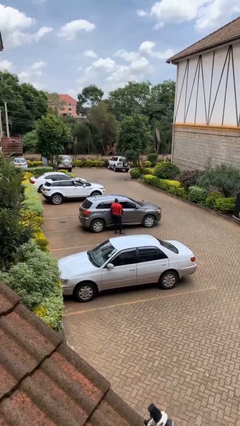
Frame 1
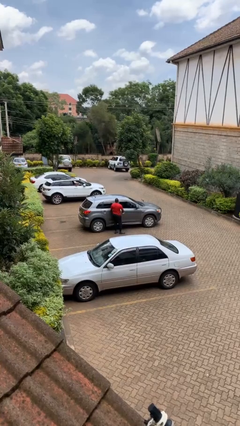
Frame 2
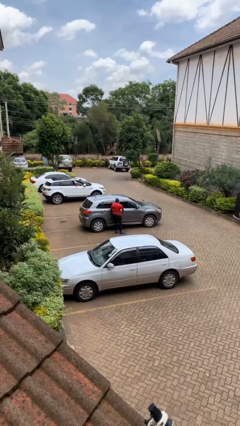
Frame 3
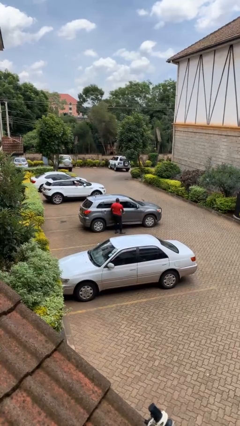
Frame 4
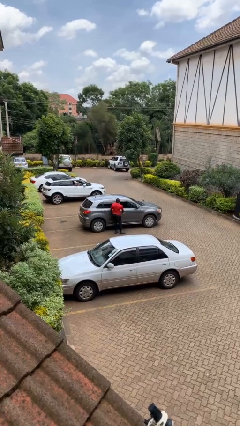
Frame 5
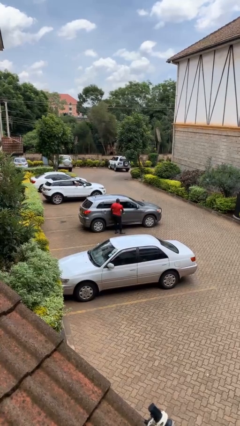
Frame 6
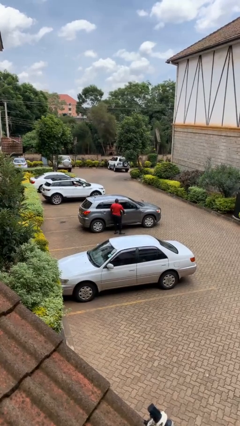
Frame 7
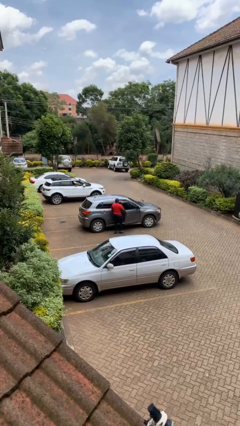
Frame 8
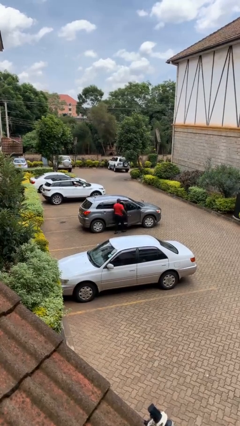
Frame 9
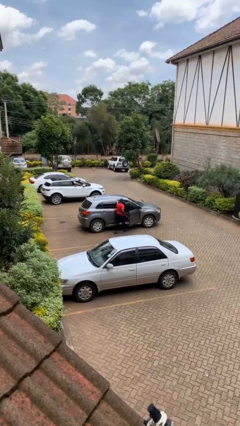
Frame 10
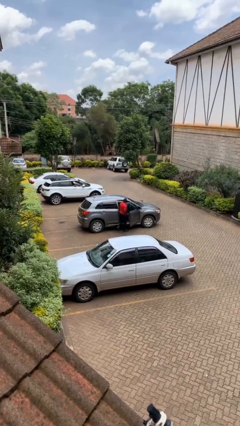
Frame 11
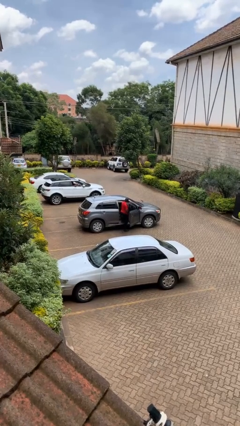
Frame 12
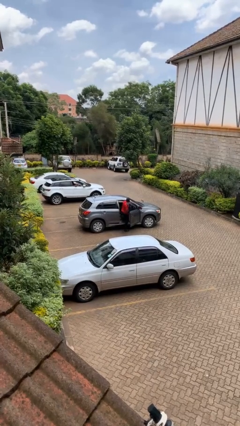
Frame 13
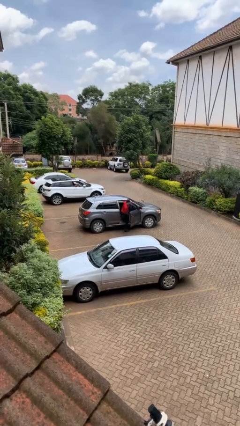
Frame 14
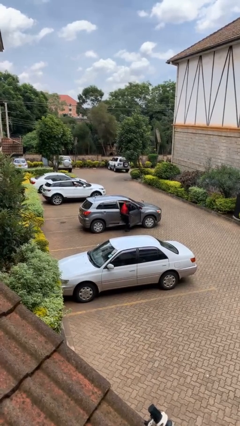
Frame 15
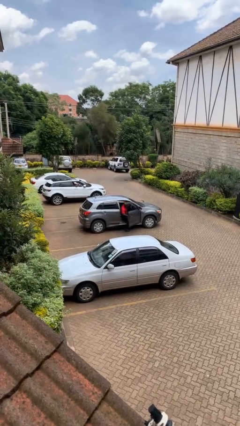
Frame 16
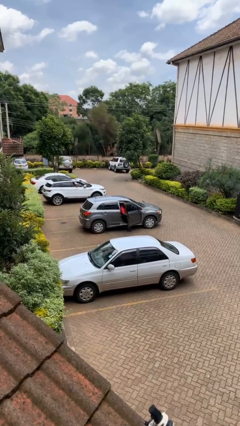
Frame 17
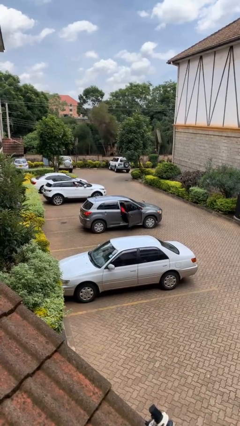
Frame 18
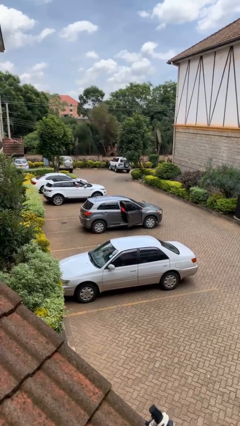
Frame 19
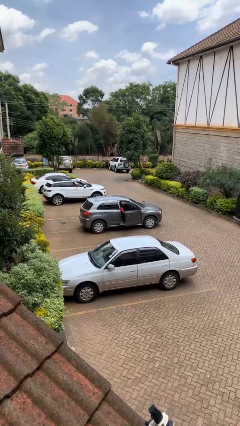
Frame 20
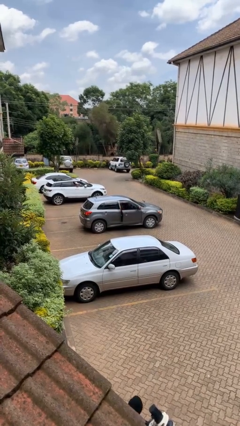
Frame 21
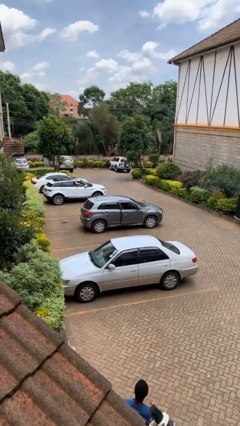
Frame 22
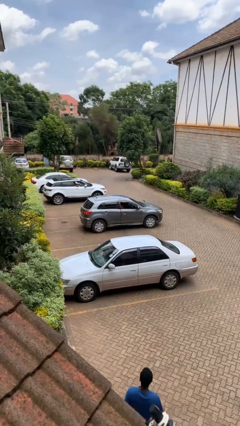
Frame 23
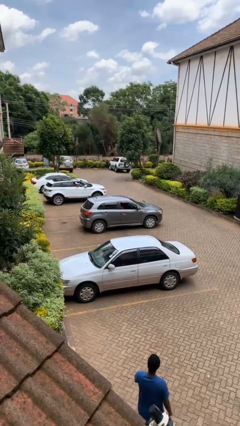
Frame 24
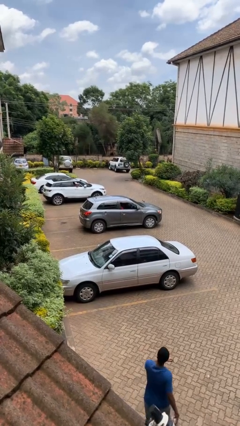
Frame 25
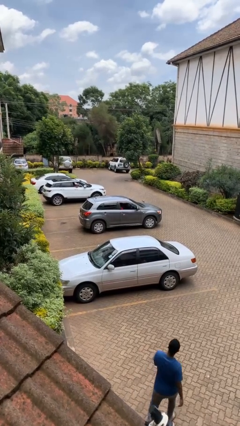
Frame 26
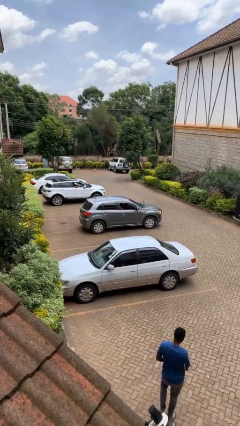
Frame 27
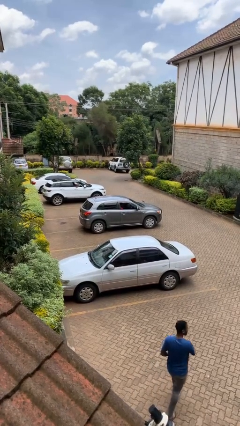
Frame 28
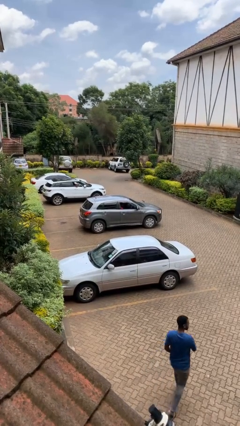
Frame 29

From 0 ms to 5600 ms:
car picks up person

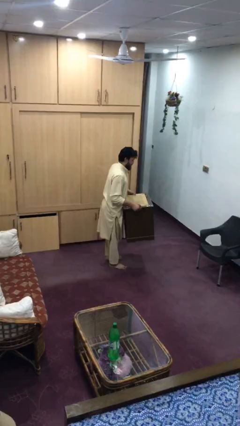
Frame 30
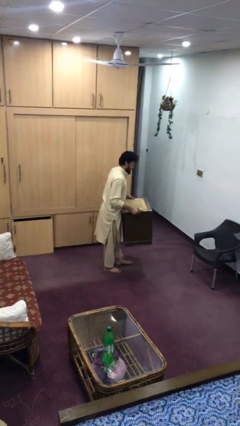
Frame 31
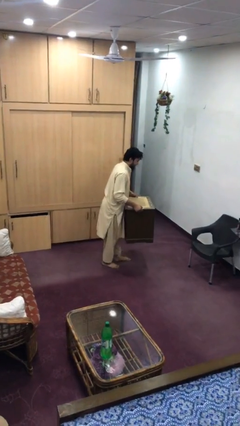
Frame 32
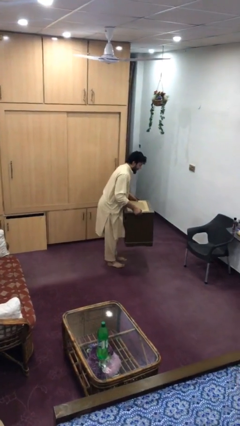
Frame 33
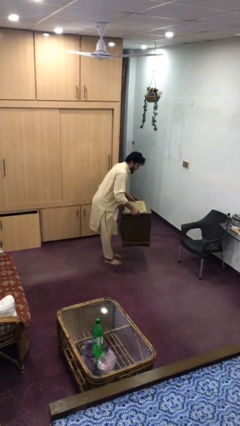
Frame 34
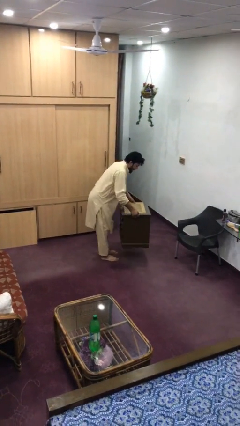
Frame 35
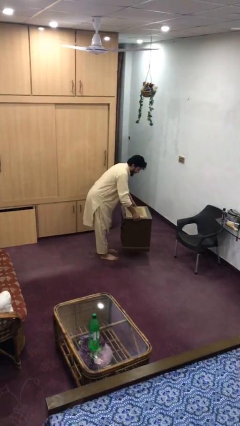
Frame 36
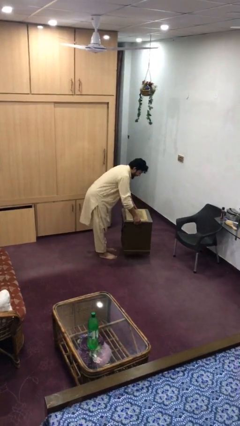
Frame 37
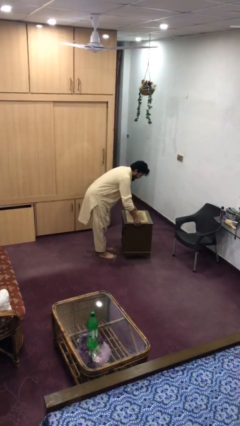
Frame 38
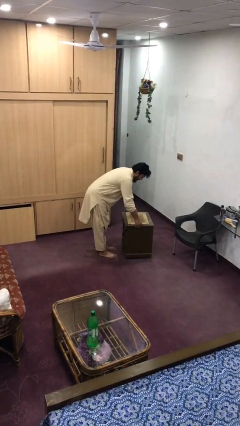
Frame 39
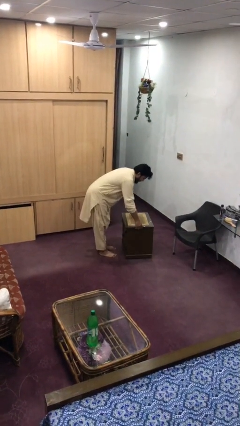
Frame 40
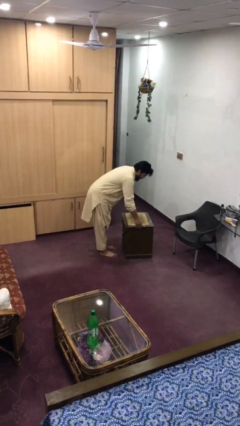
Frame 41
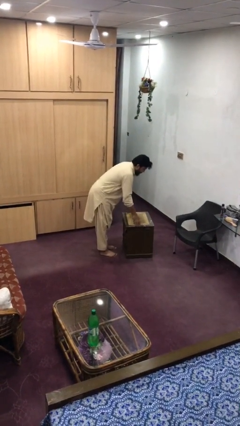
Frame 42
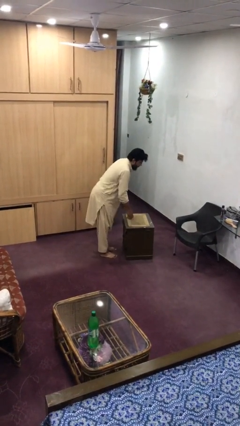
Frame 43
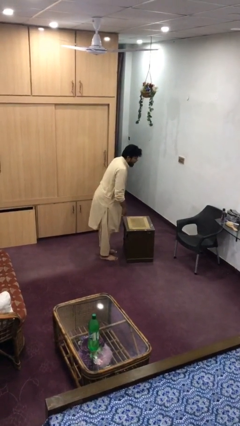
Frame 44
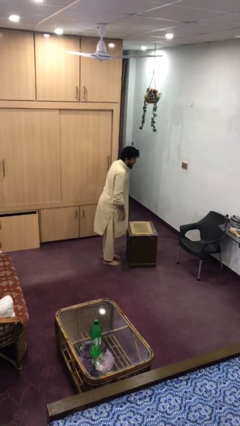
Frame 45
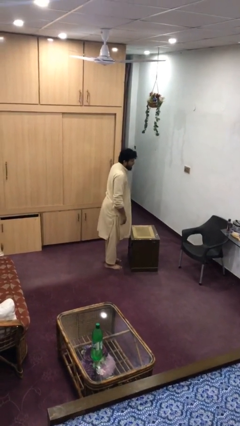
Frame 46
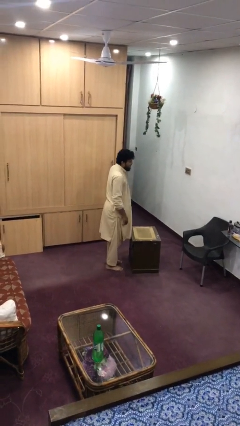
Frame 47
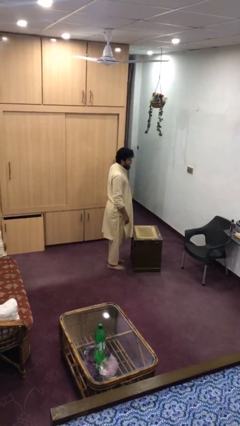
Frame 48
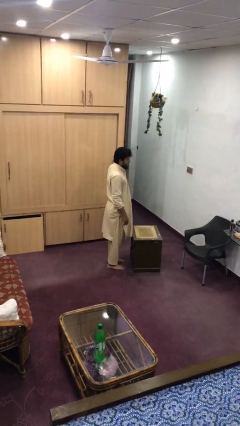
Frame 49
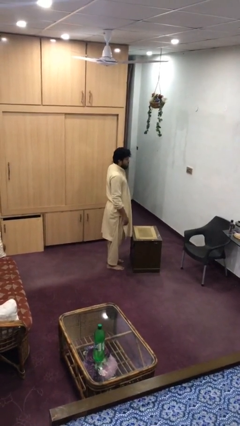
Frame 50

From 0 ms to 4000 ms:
person puts down object on floor

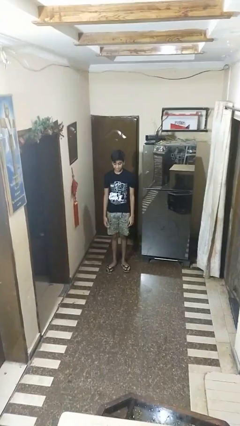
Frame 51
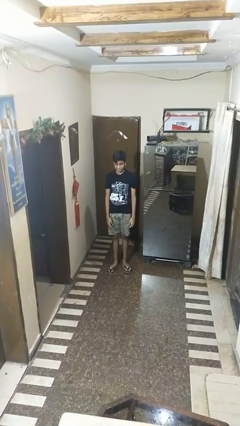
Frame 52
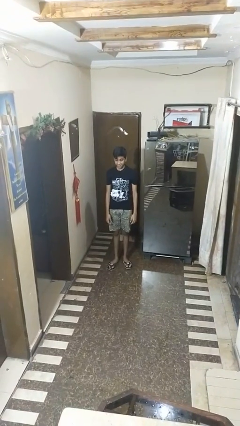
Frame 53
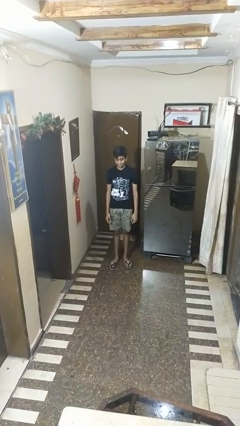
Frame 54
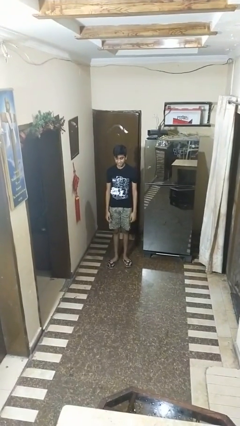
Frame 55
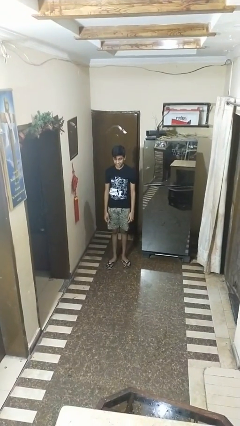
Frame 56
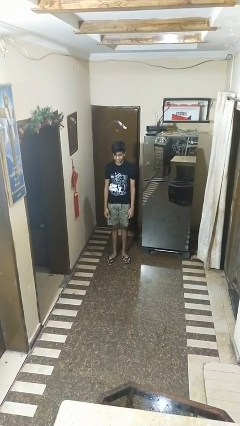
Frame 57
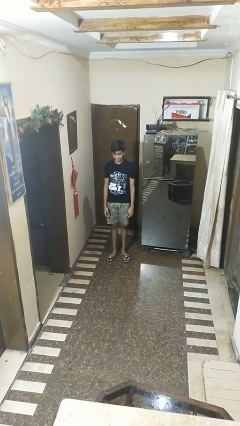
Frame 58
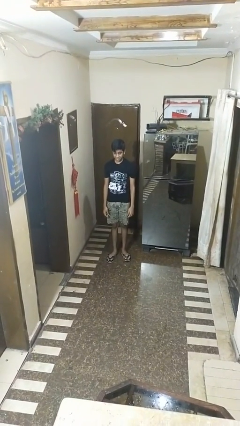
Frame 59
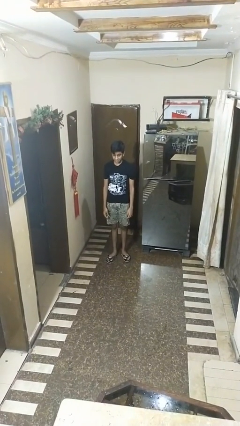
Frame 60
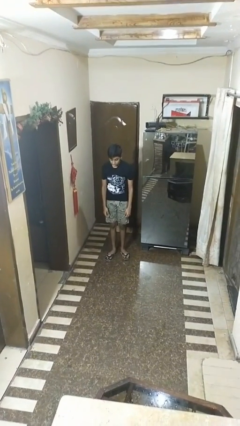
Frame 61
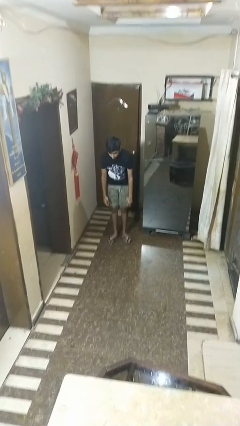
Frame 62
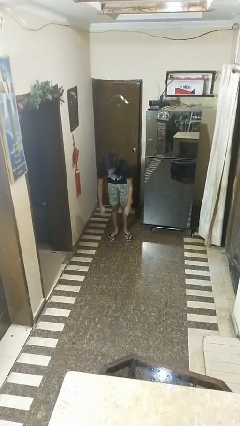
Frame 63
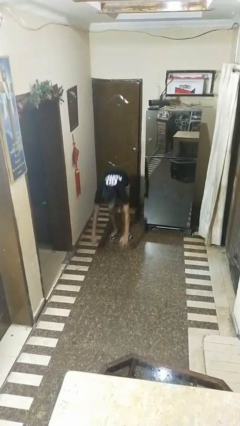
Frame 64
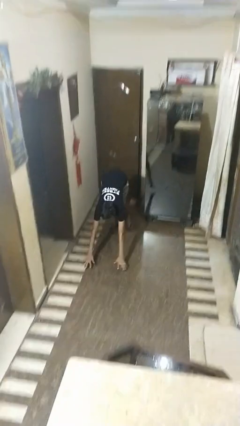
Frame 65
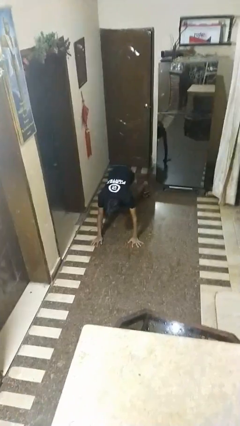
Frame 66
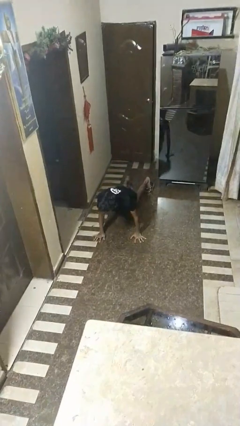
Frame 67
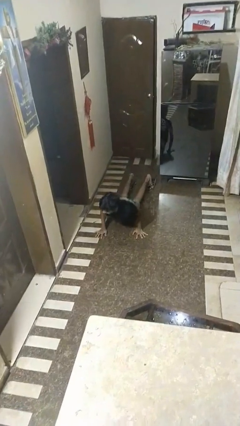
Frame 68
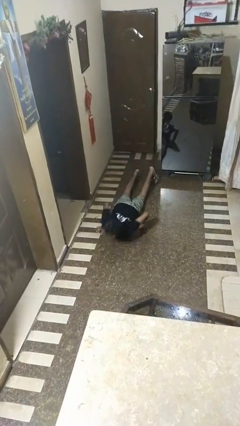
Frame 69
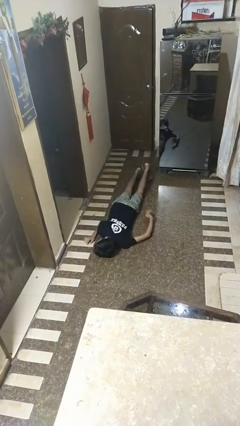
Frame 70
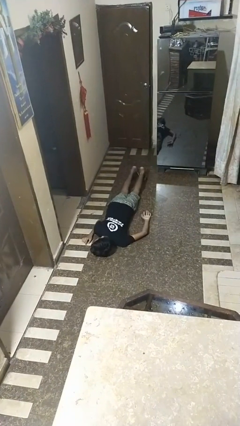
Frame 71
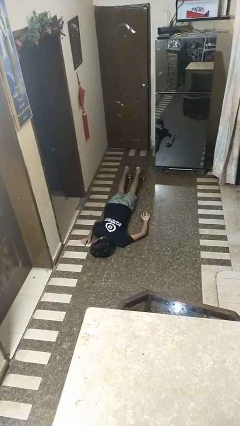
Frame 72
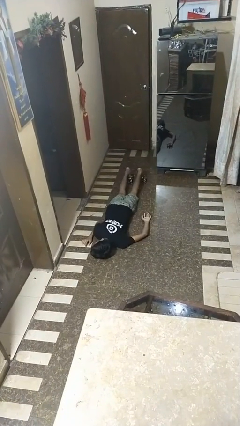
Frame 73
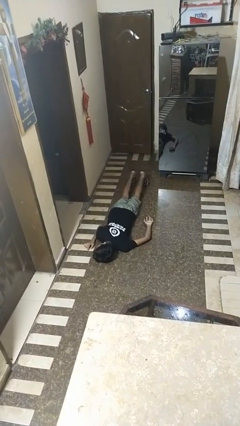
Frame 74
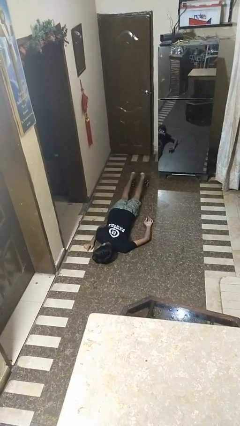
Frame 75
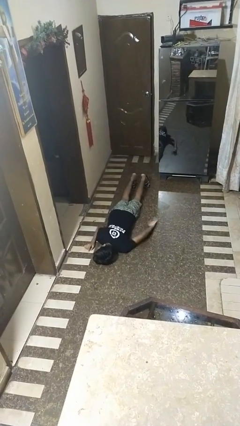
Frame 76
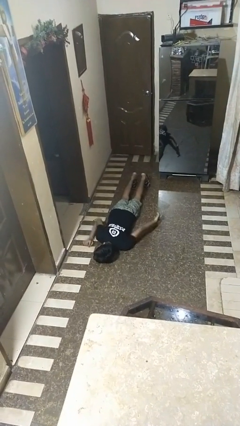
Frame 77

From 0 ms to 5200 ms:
person falls while standing

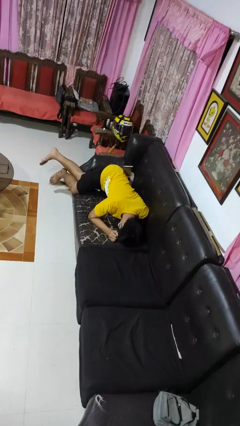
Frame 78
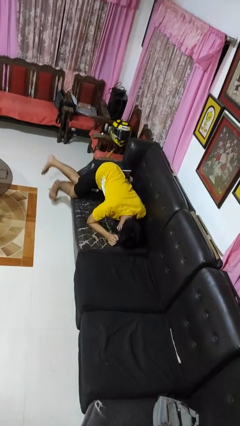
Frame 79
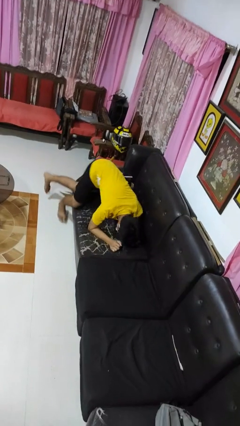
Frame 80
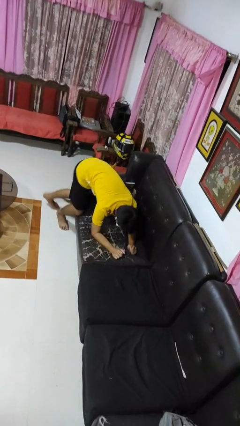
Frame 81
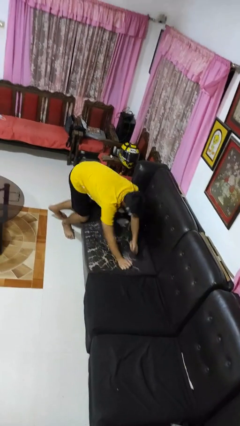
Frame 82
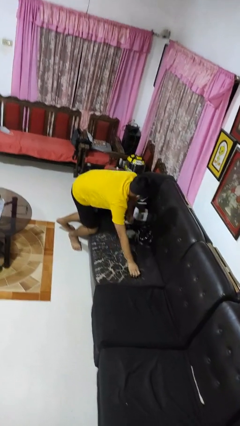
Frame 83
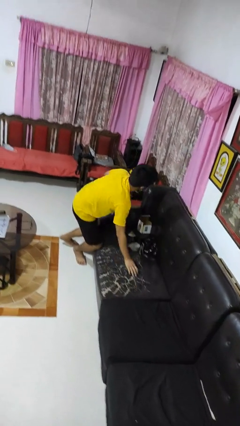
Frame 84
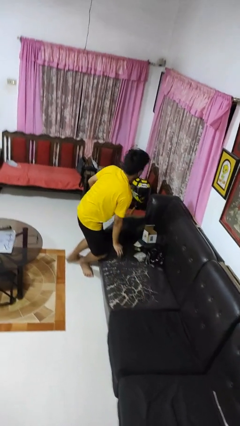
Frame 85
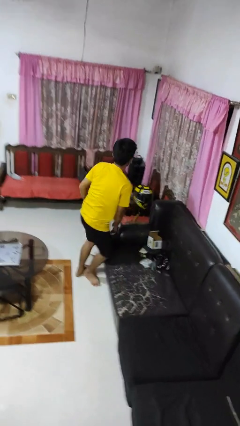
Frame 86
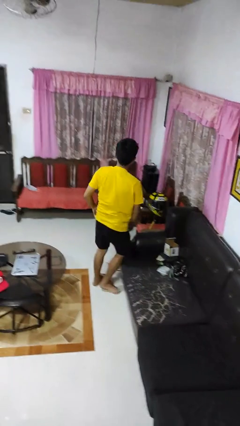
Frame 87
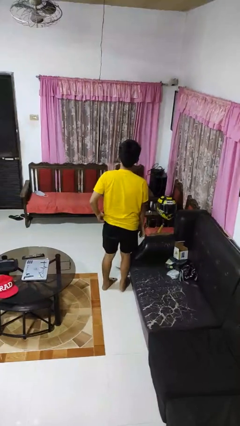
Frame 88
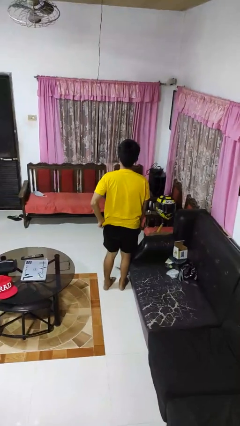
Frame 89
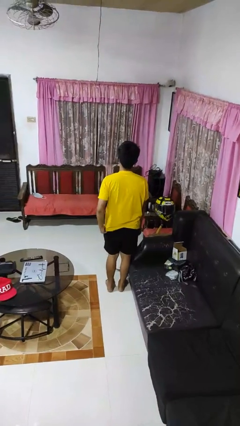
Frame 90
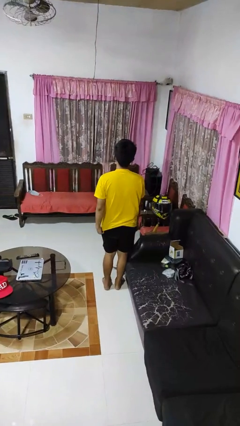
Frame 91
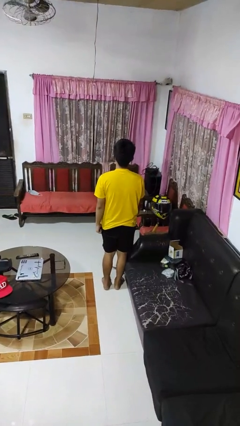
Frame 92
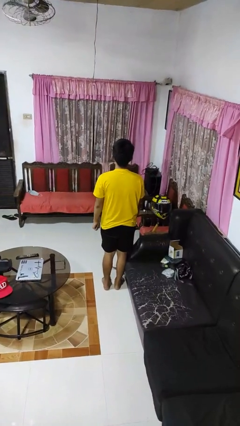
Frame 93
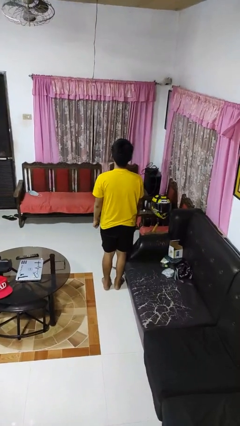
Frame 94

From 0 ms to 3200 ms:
person stands up
